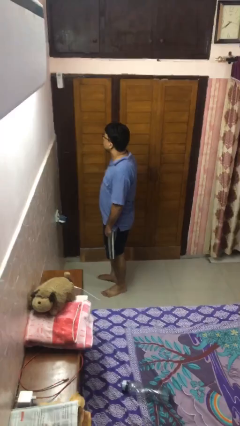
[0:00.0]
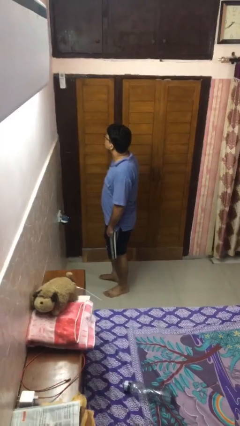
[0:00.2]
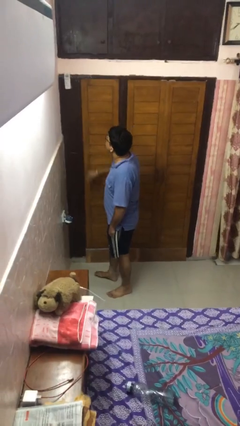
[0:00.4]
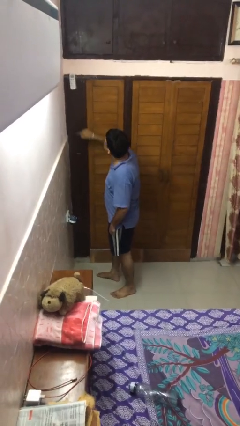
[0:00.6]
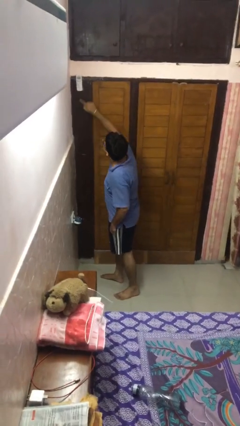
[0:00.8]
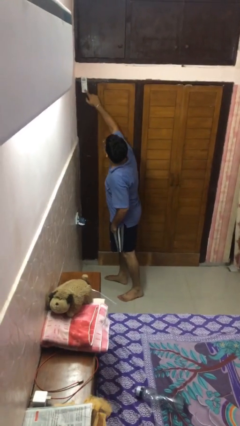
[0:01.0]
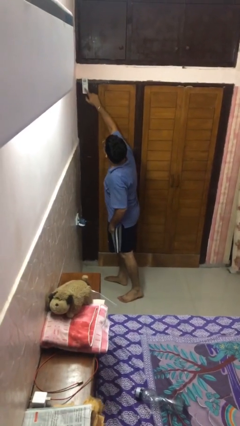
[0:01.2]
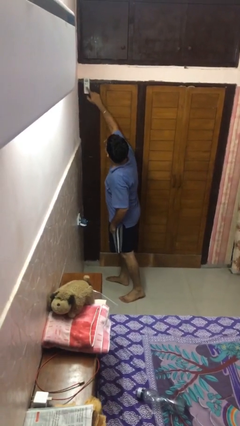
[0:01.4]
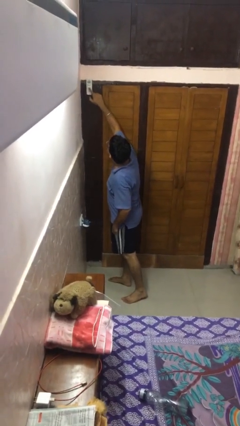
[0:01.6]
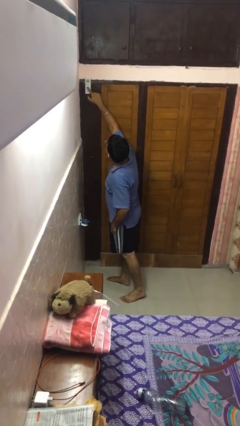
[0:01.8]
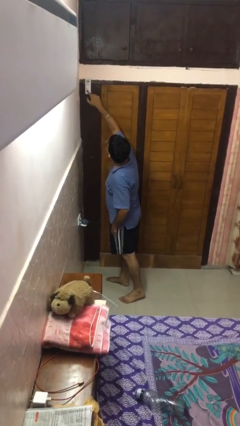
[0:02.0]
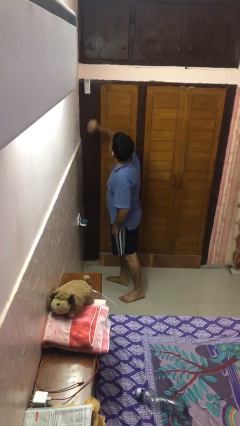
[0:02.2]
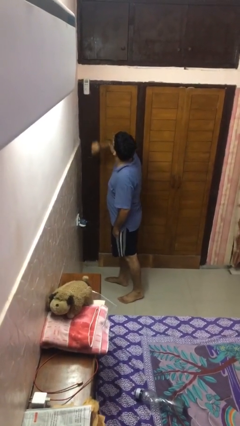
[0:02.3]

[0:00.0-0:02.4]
person adjusts thermostat

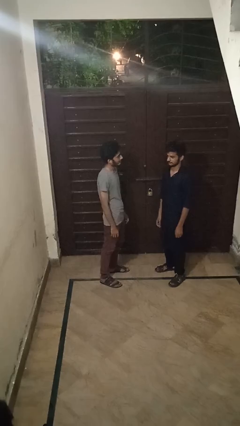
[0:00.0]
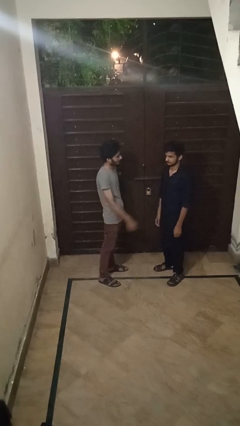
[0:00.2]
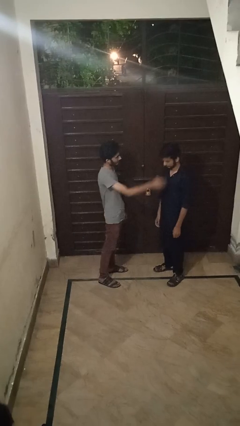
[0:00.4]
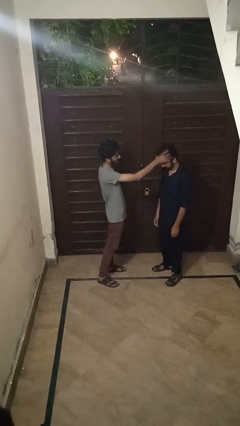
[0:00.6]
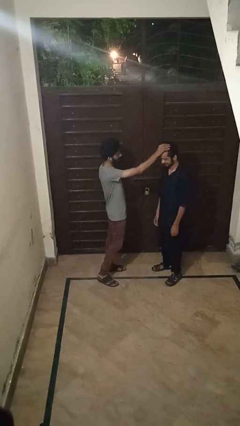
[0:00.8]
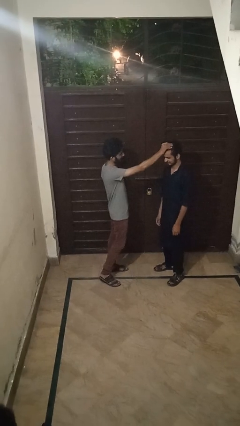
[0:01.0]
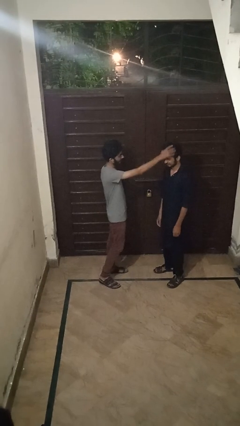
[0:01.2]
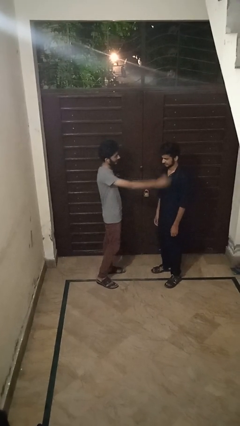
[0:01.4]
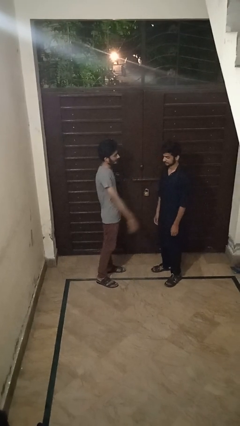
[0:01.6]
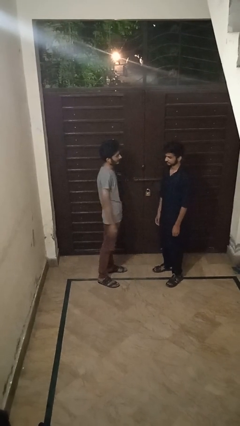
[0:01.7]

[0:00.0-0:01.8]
person grabs person by hair

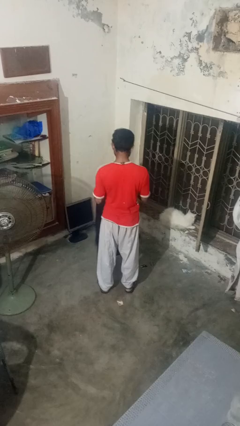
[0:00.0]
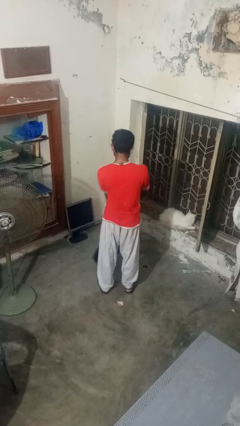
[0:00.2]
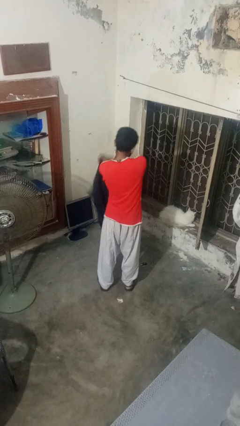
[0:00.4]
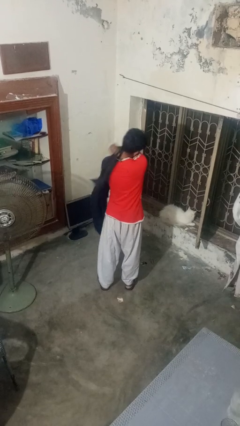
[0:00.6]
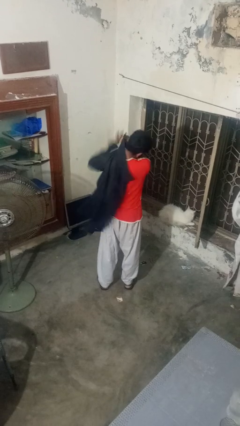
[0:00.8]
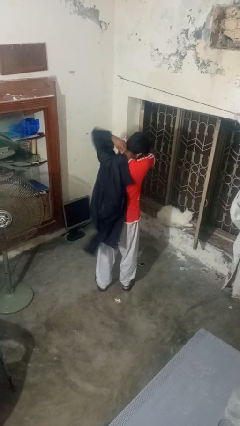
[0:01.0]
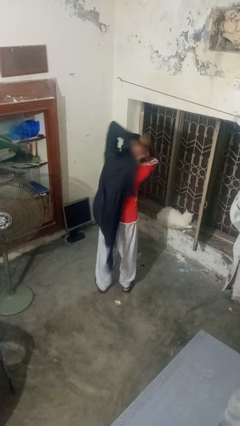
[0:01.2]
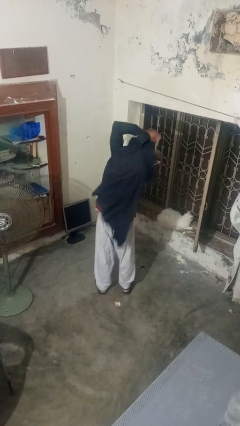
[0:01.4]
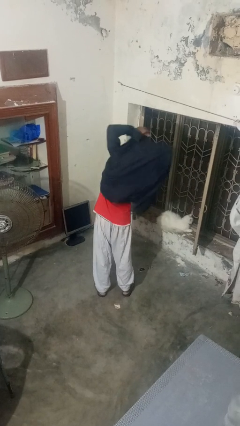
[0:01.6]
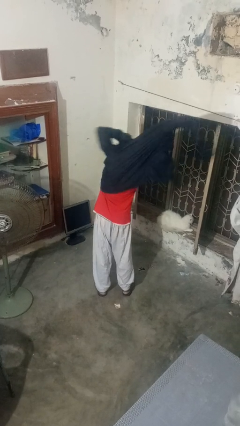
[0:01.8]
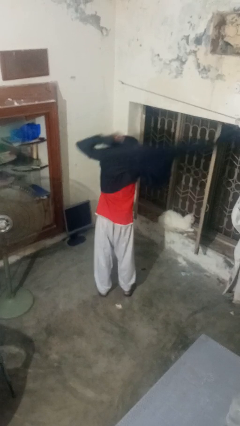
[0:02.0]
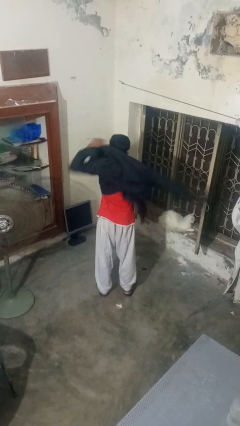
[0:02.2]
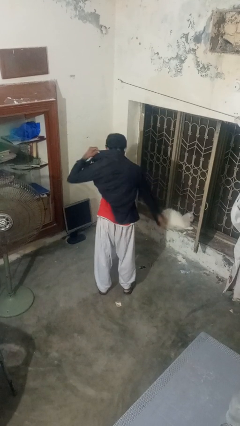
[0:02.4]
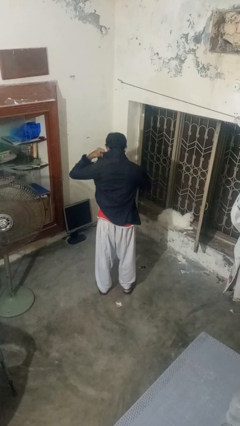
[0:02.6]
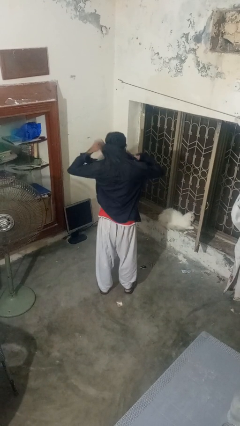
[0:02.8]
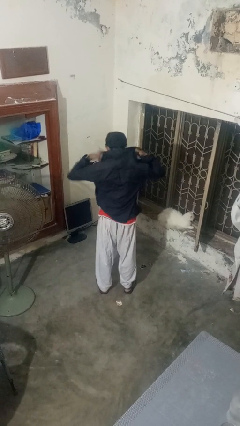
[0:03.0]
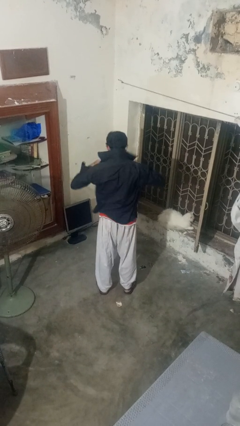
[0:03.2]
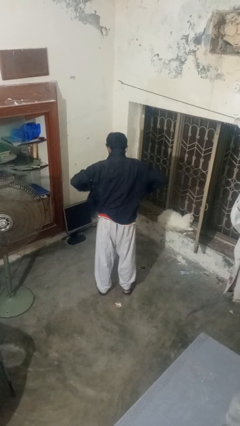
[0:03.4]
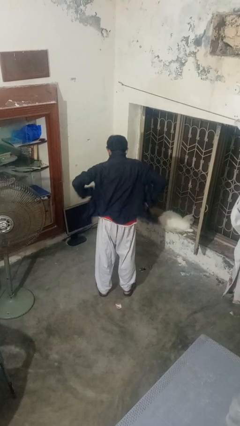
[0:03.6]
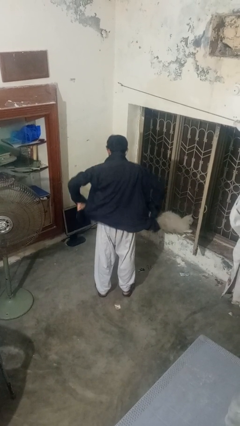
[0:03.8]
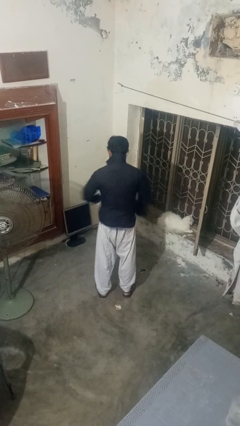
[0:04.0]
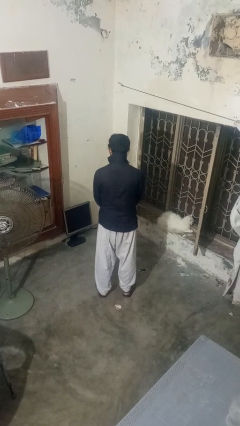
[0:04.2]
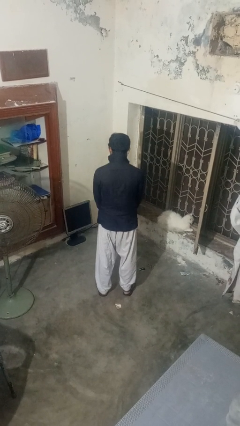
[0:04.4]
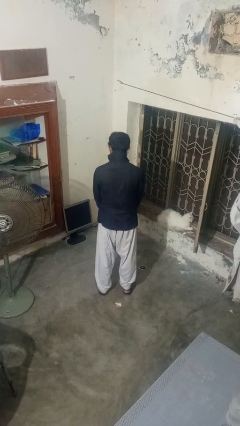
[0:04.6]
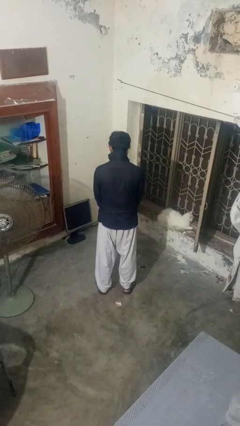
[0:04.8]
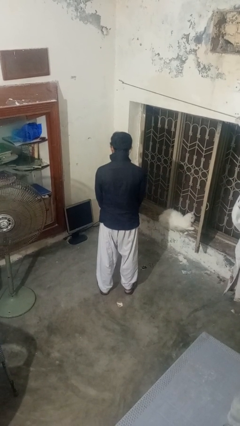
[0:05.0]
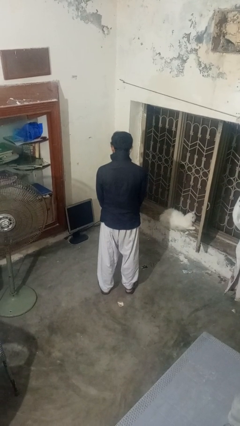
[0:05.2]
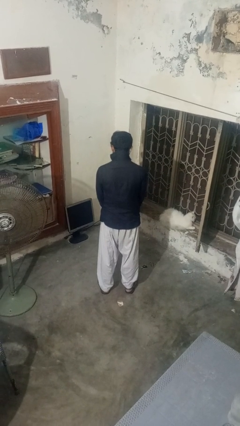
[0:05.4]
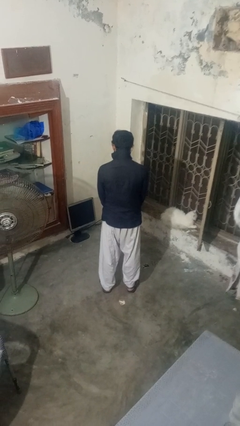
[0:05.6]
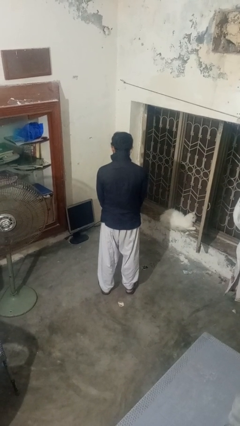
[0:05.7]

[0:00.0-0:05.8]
person puts on shirt

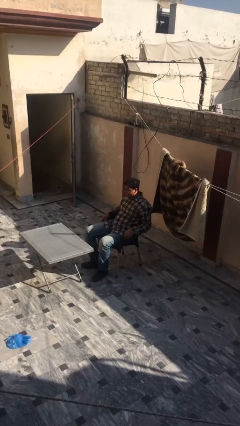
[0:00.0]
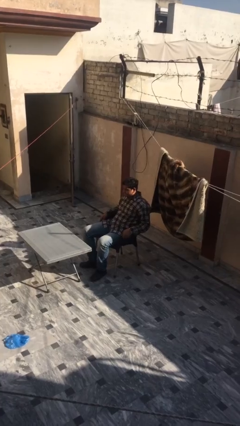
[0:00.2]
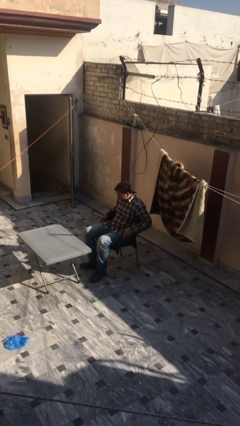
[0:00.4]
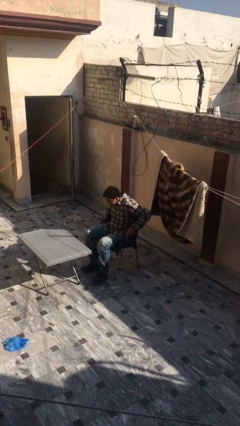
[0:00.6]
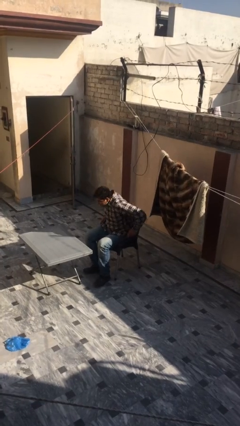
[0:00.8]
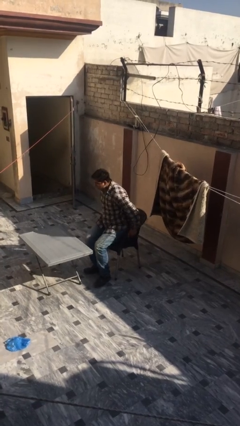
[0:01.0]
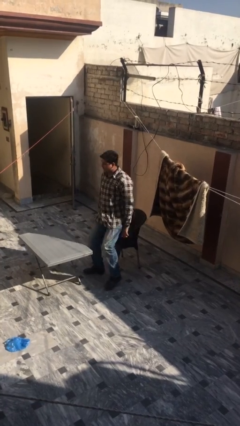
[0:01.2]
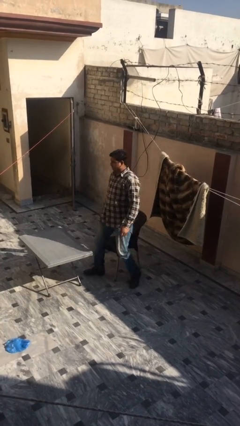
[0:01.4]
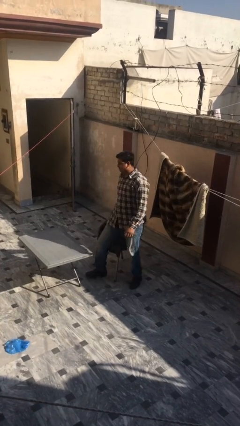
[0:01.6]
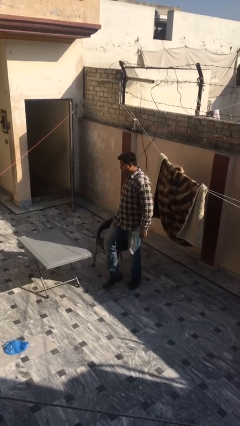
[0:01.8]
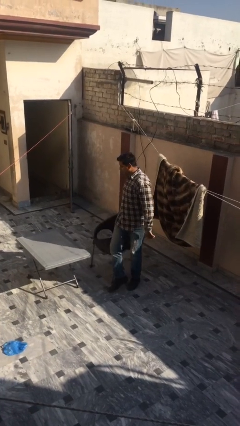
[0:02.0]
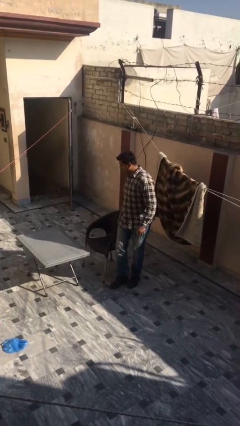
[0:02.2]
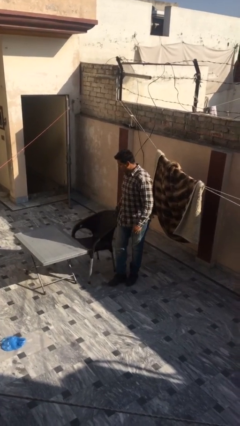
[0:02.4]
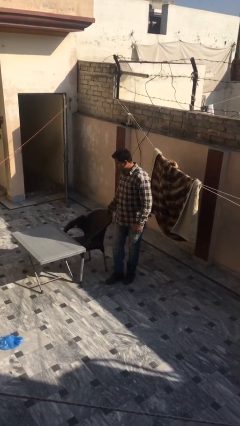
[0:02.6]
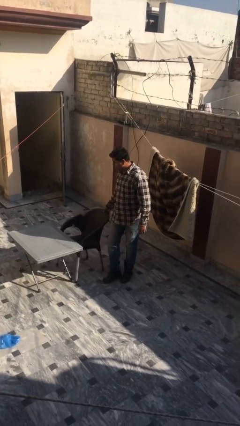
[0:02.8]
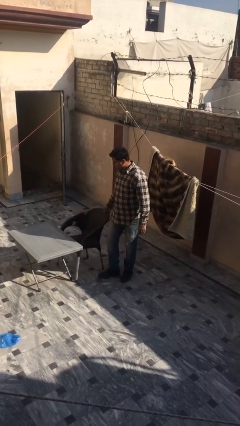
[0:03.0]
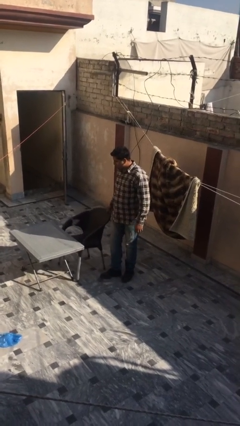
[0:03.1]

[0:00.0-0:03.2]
person stands up

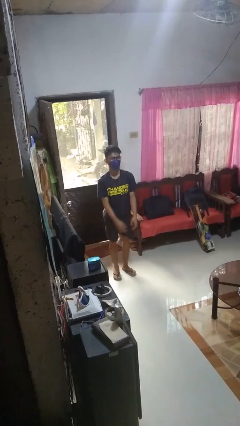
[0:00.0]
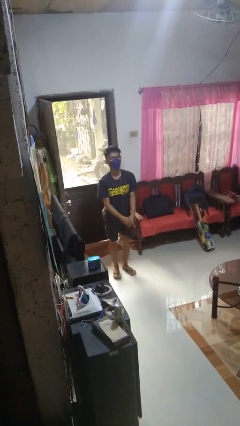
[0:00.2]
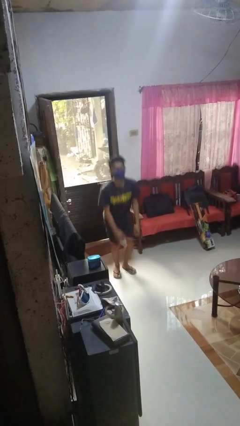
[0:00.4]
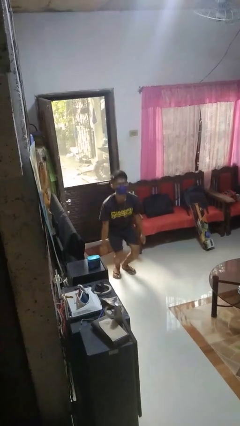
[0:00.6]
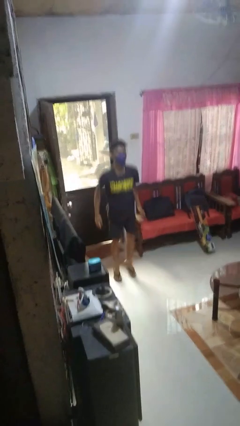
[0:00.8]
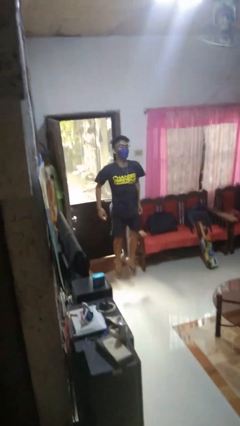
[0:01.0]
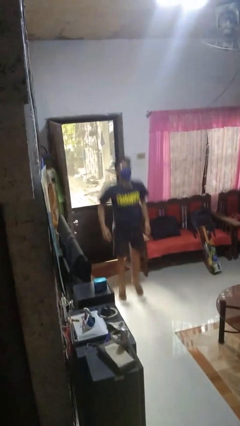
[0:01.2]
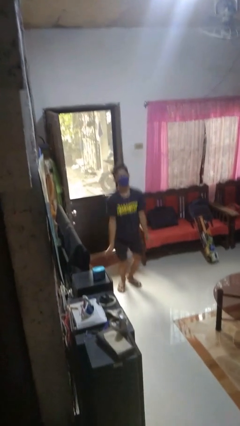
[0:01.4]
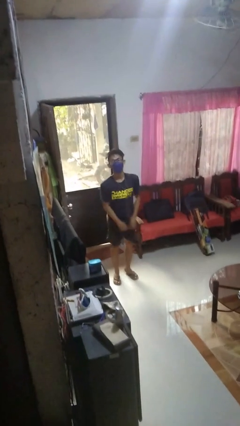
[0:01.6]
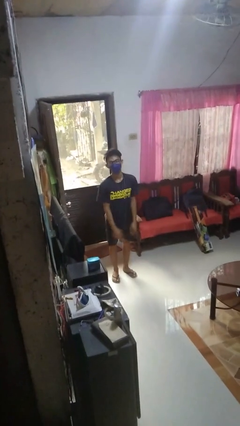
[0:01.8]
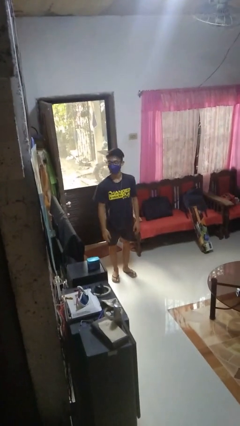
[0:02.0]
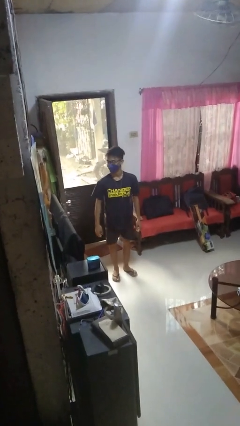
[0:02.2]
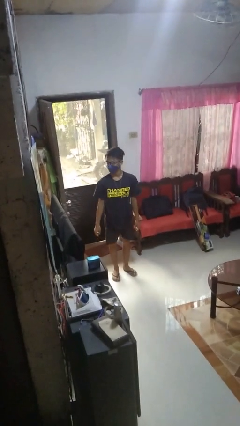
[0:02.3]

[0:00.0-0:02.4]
person jumps

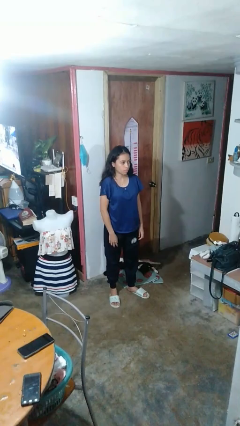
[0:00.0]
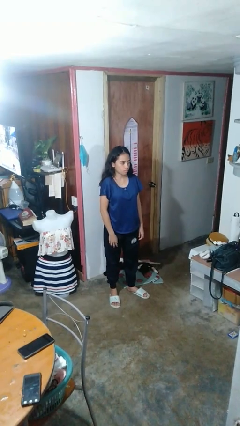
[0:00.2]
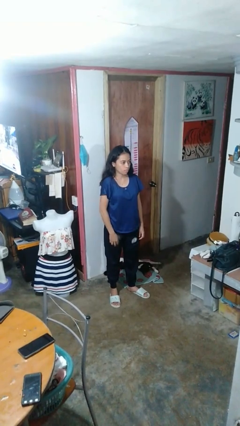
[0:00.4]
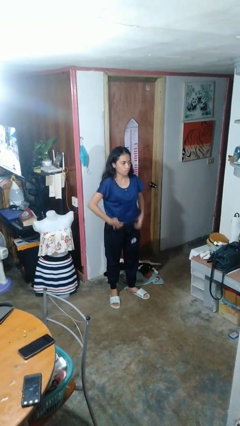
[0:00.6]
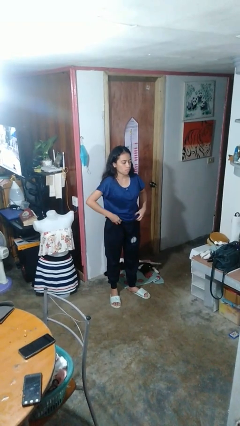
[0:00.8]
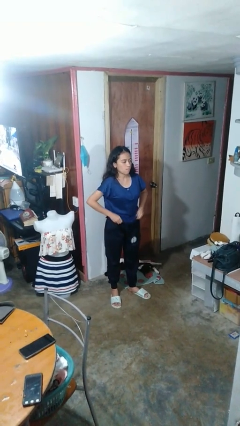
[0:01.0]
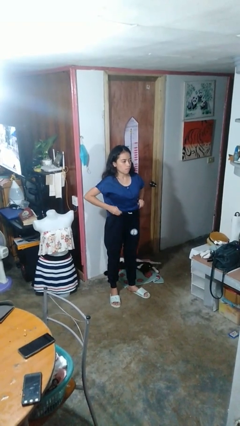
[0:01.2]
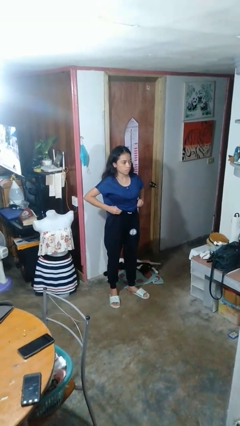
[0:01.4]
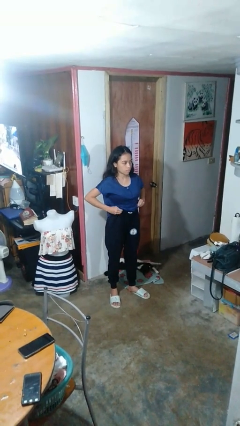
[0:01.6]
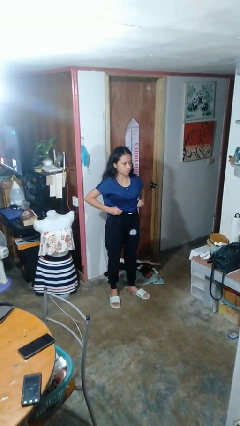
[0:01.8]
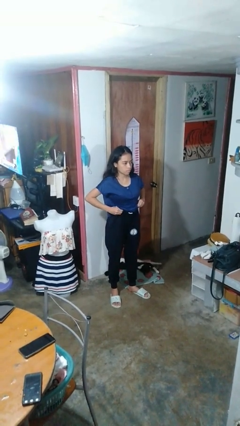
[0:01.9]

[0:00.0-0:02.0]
person hikes up pants
